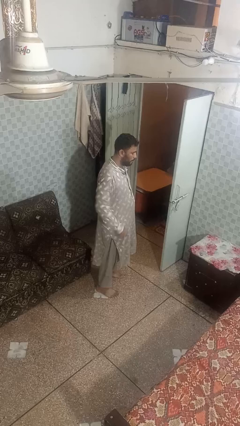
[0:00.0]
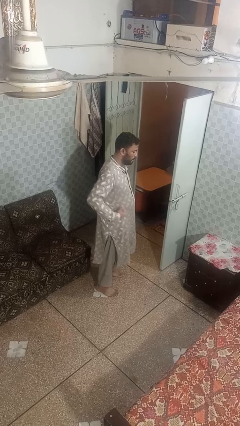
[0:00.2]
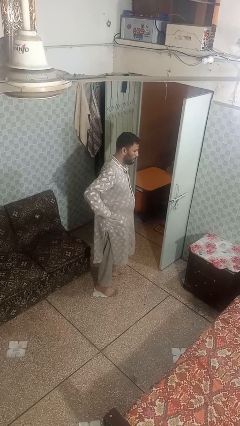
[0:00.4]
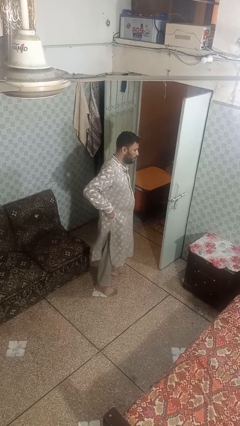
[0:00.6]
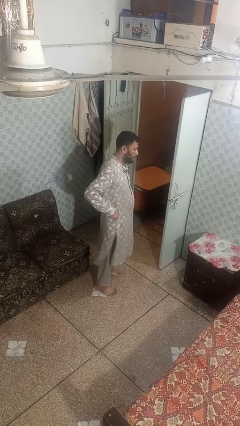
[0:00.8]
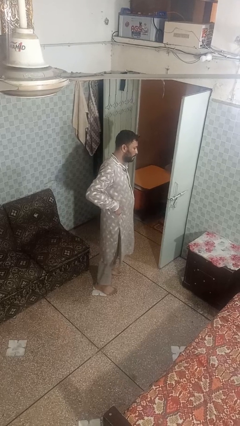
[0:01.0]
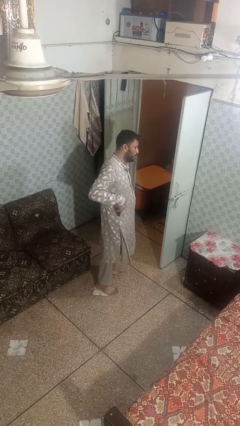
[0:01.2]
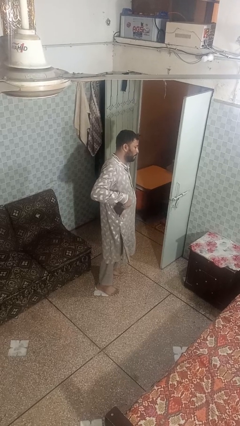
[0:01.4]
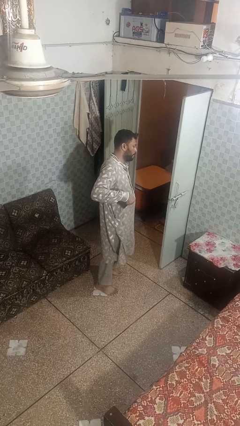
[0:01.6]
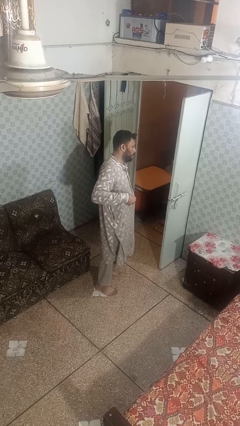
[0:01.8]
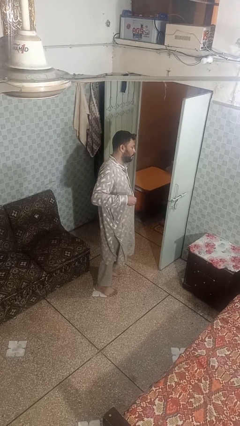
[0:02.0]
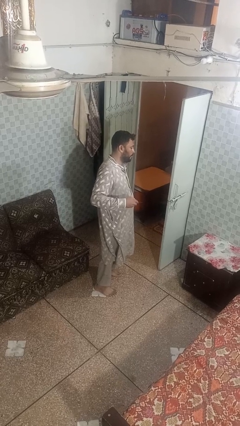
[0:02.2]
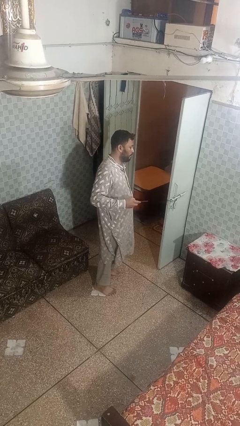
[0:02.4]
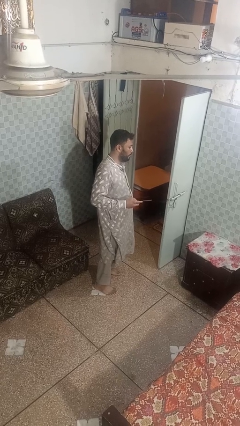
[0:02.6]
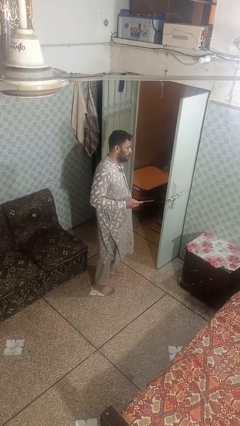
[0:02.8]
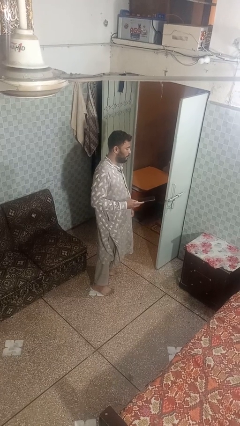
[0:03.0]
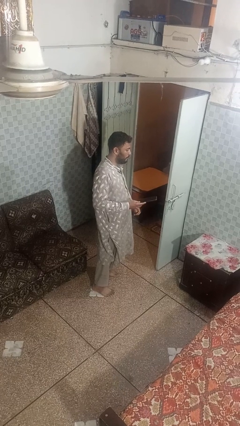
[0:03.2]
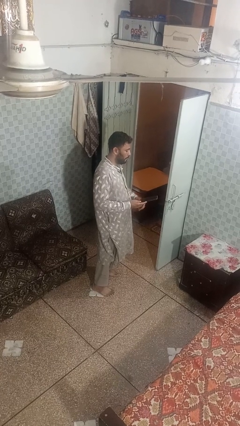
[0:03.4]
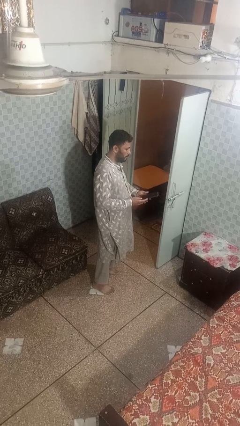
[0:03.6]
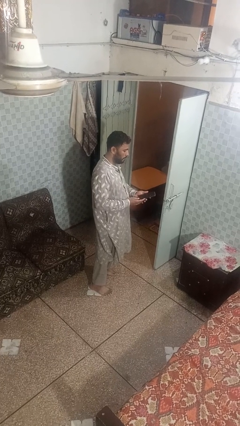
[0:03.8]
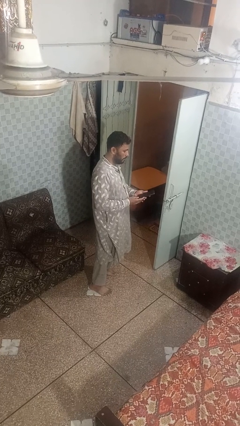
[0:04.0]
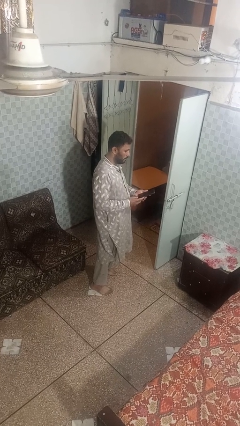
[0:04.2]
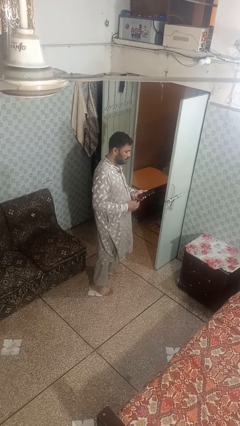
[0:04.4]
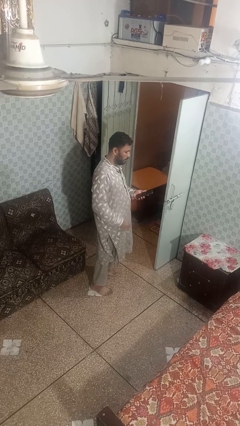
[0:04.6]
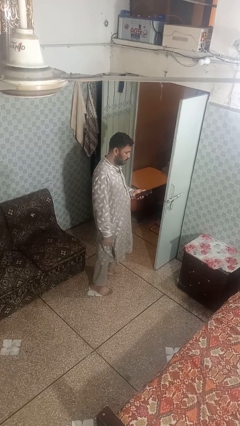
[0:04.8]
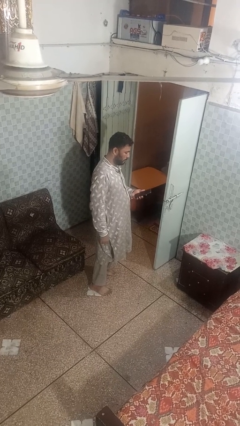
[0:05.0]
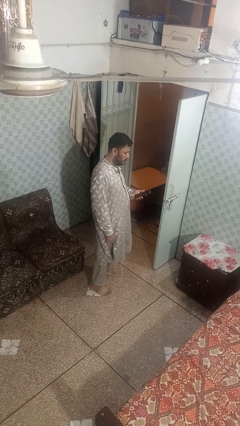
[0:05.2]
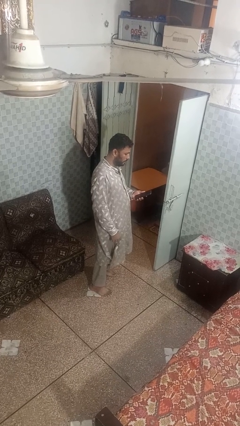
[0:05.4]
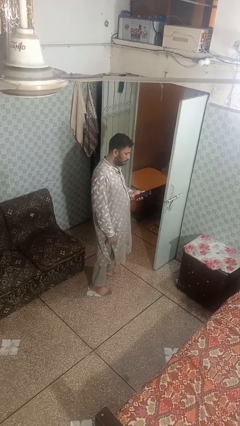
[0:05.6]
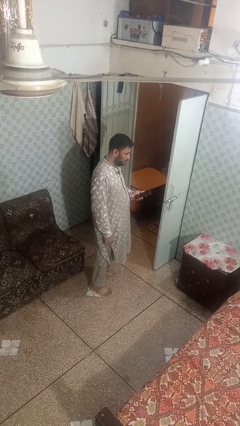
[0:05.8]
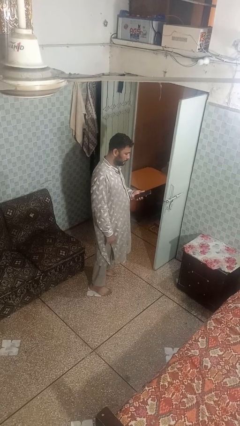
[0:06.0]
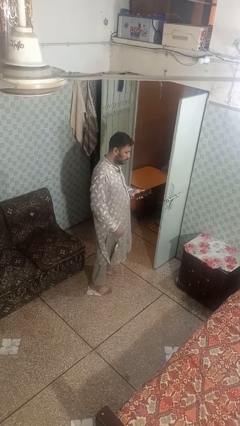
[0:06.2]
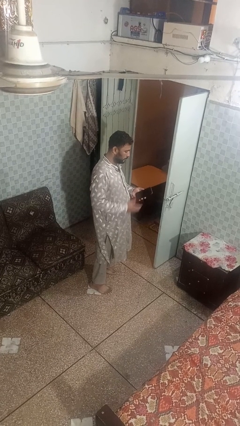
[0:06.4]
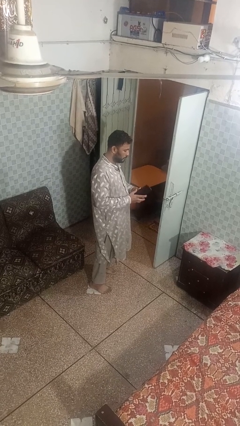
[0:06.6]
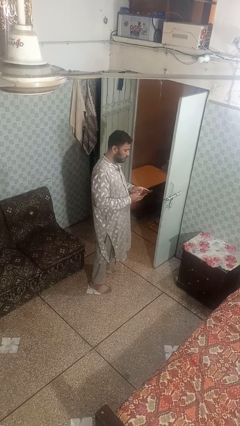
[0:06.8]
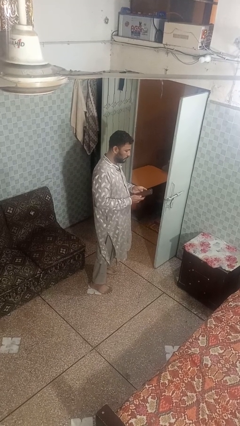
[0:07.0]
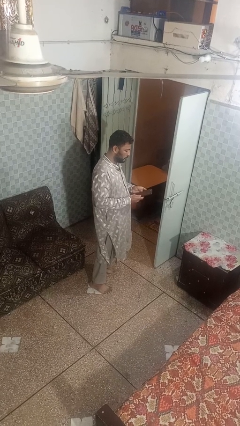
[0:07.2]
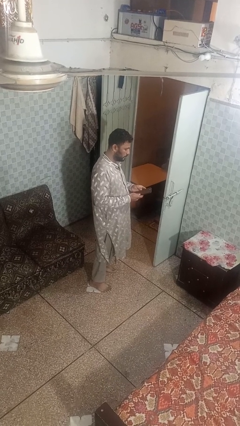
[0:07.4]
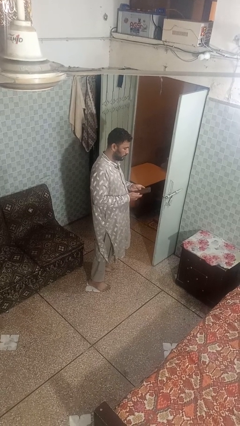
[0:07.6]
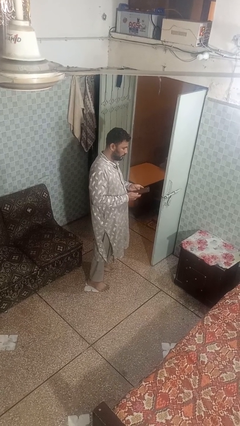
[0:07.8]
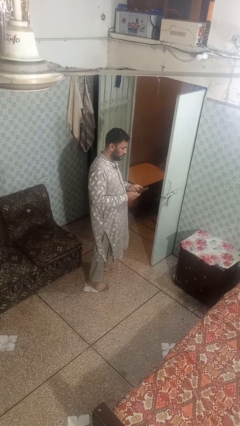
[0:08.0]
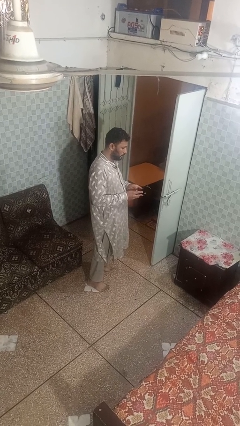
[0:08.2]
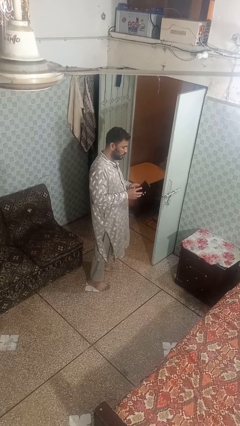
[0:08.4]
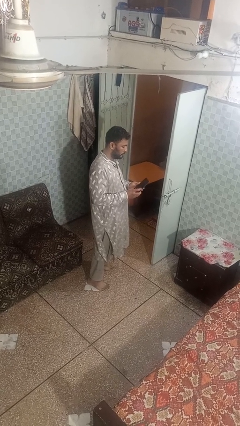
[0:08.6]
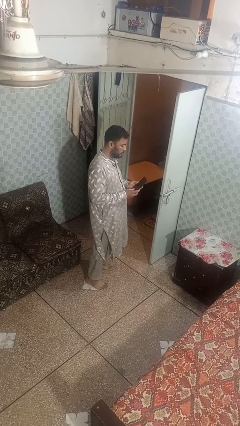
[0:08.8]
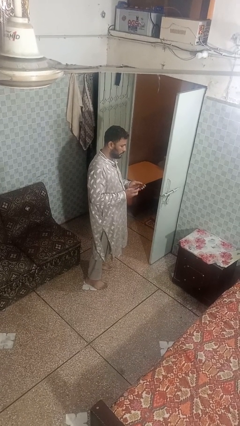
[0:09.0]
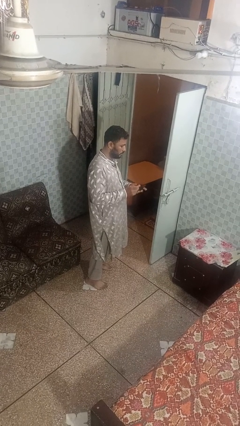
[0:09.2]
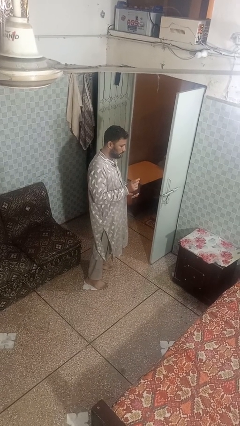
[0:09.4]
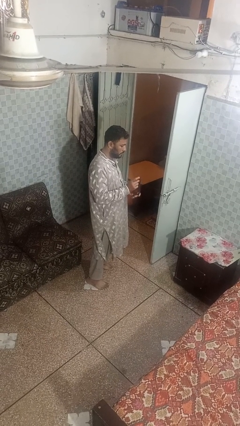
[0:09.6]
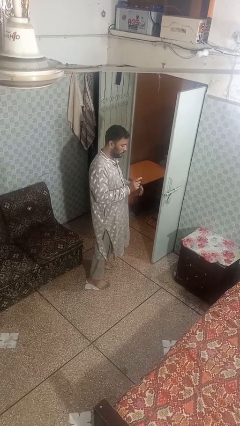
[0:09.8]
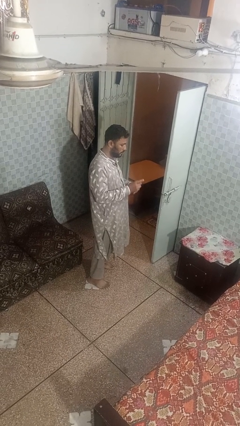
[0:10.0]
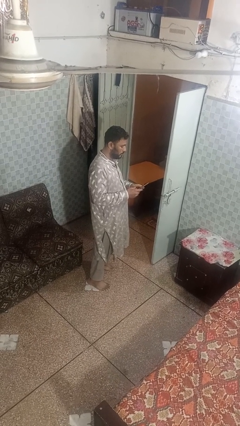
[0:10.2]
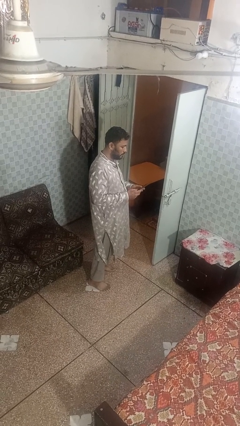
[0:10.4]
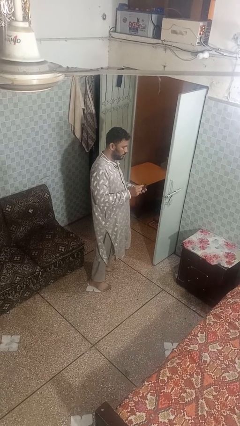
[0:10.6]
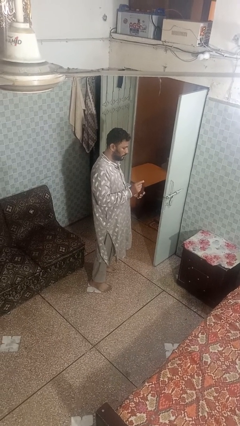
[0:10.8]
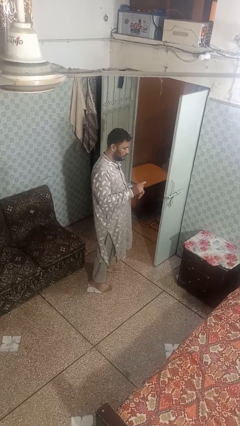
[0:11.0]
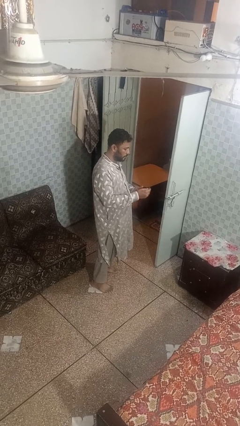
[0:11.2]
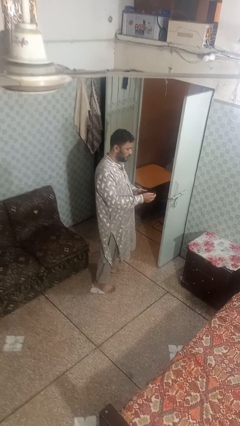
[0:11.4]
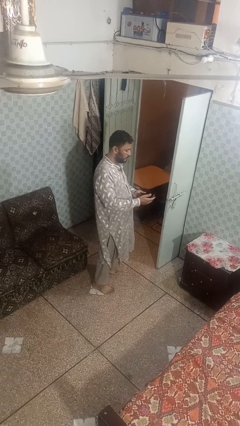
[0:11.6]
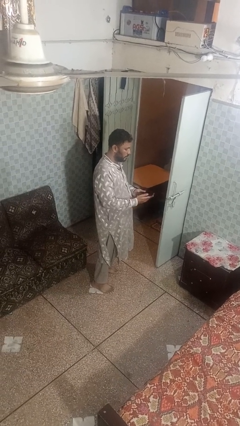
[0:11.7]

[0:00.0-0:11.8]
person takes phone from pocket

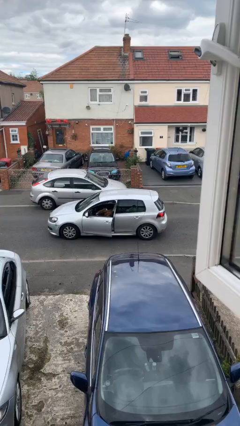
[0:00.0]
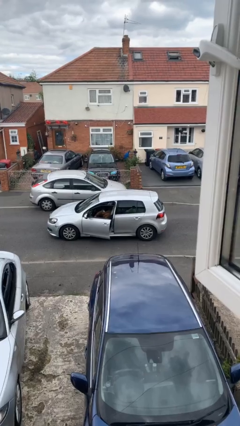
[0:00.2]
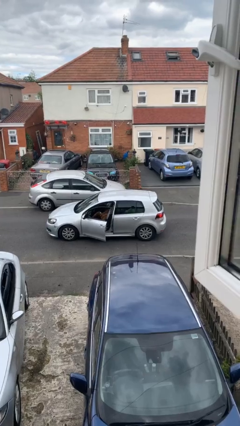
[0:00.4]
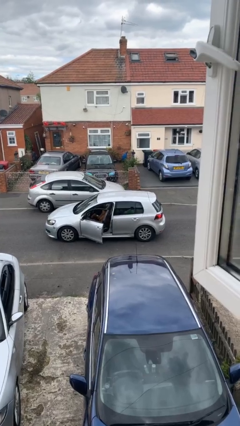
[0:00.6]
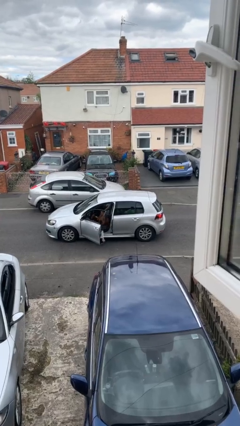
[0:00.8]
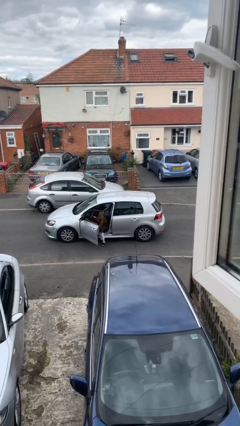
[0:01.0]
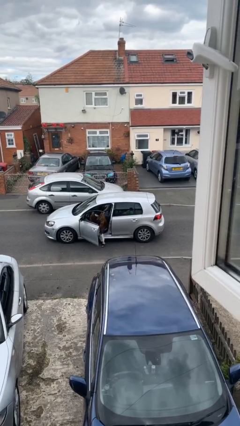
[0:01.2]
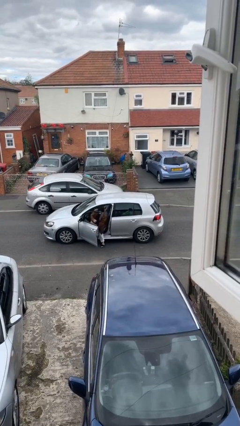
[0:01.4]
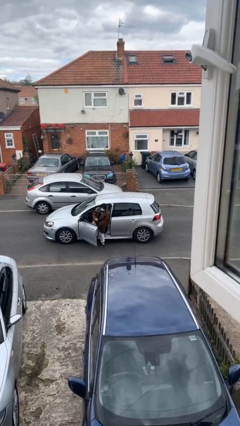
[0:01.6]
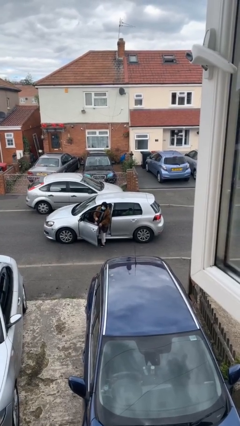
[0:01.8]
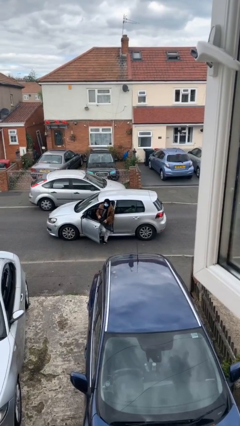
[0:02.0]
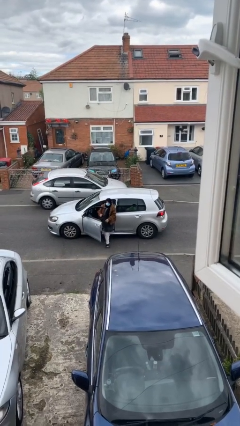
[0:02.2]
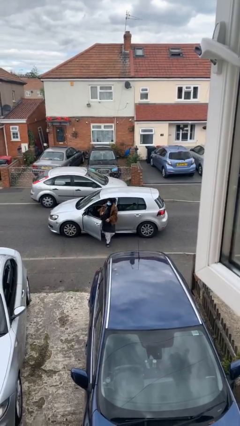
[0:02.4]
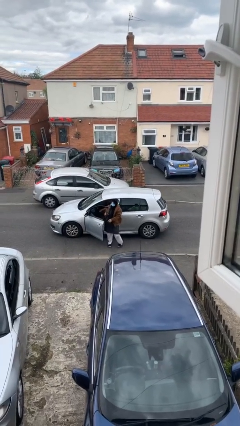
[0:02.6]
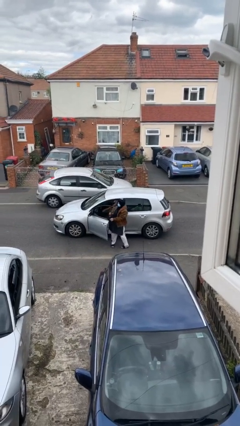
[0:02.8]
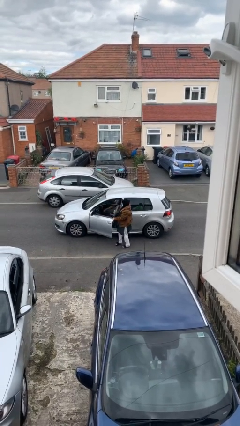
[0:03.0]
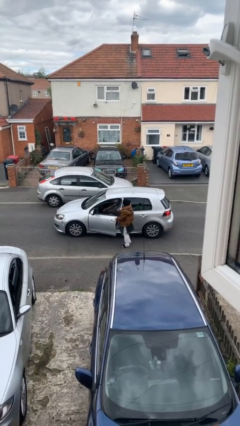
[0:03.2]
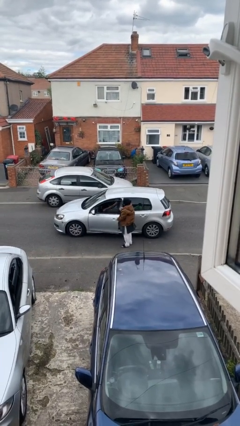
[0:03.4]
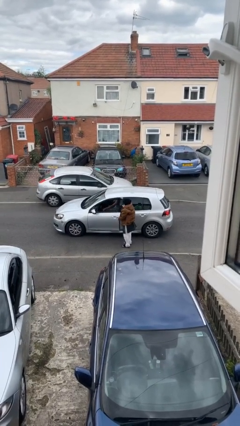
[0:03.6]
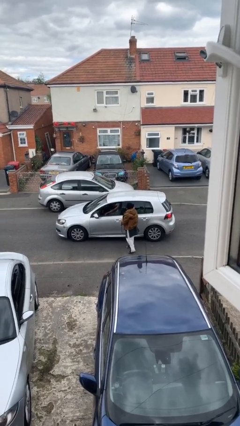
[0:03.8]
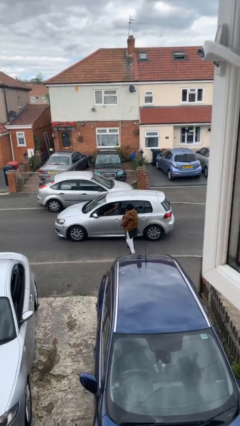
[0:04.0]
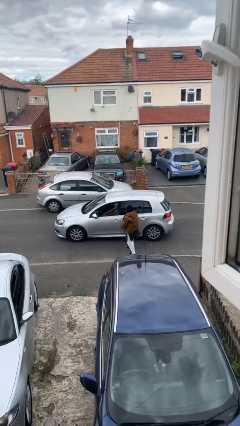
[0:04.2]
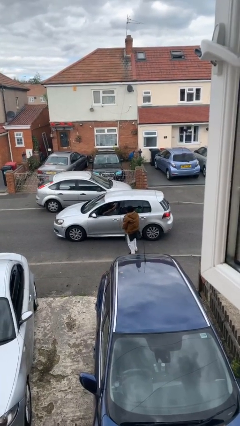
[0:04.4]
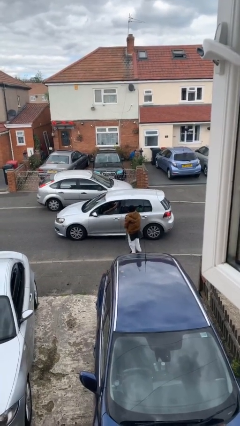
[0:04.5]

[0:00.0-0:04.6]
car drops off person

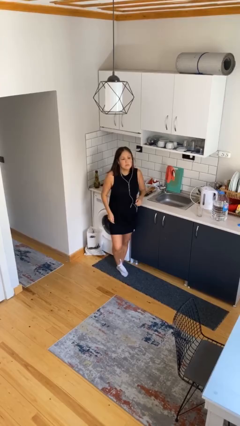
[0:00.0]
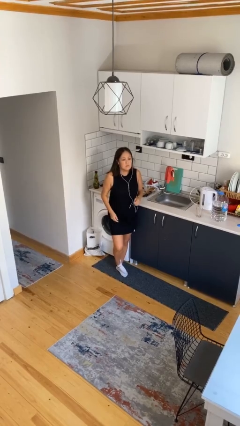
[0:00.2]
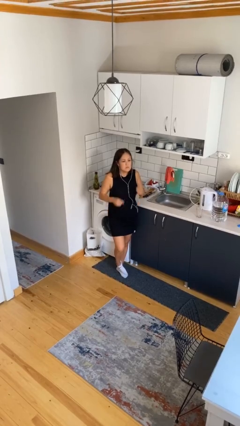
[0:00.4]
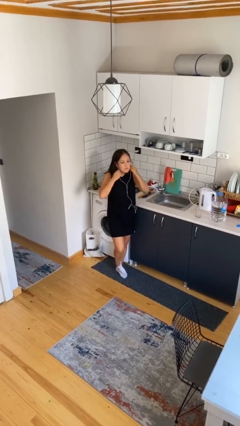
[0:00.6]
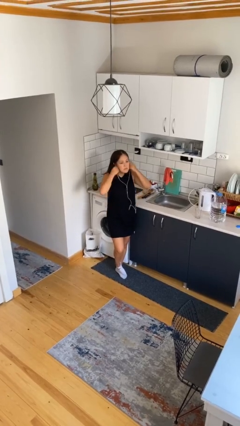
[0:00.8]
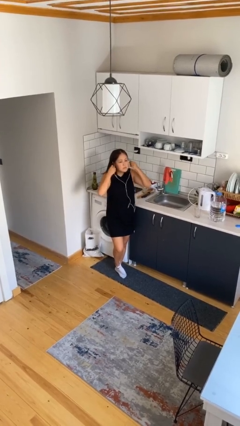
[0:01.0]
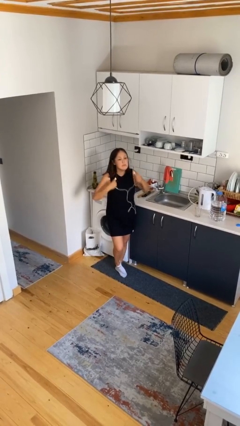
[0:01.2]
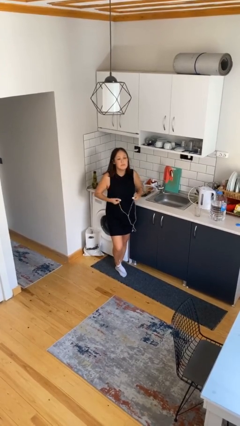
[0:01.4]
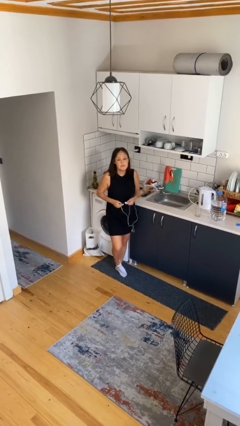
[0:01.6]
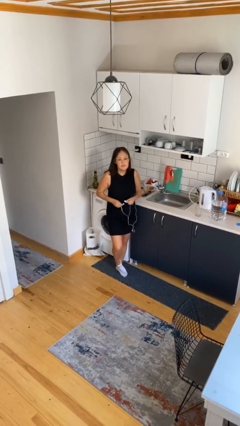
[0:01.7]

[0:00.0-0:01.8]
person takes off headphones
